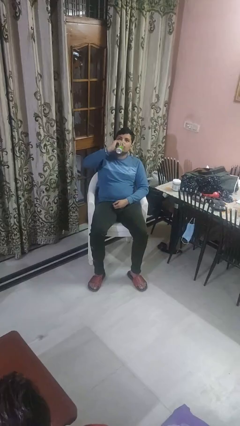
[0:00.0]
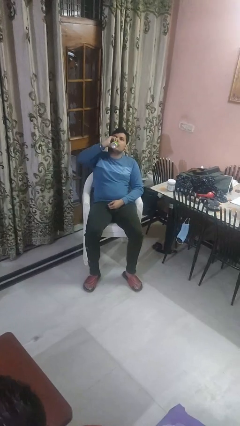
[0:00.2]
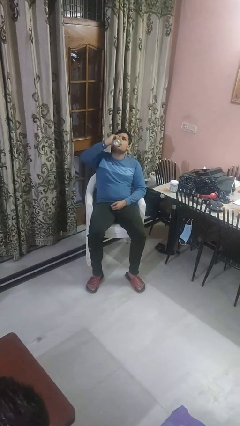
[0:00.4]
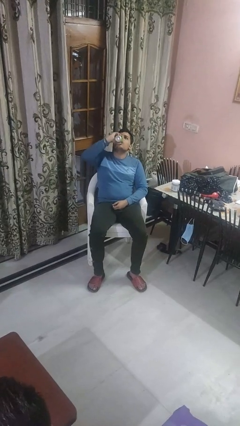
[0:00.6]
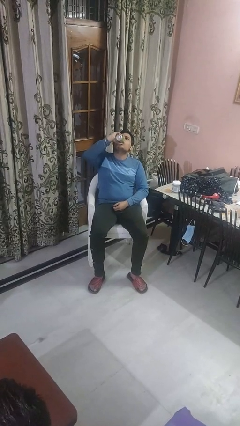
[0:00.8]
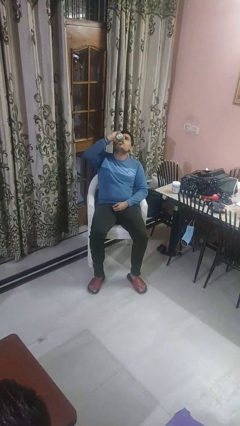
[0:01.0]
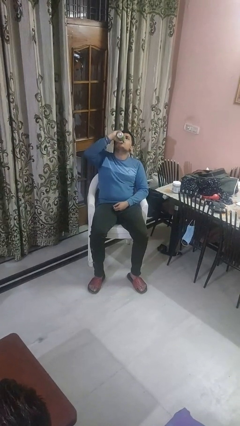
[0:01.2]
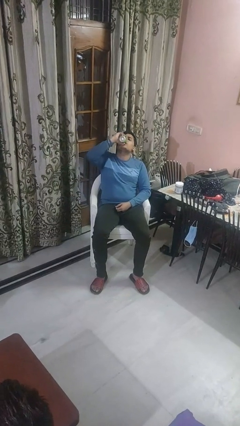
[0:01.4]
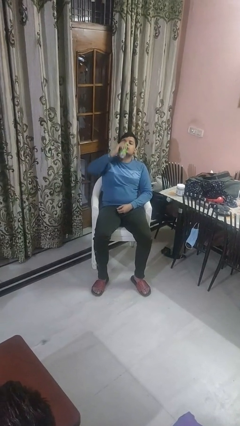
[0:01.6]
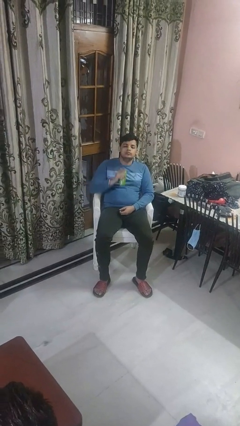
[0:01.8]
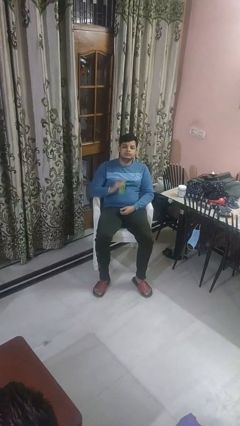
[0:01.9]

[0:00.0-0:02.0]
person drinks from beverage can

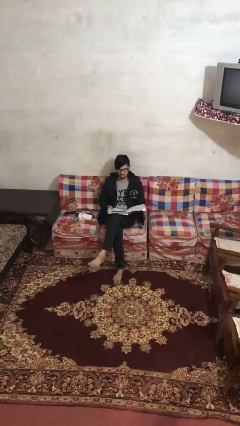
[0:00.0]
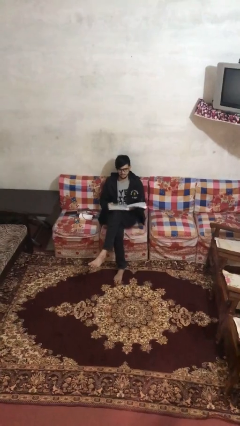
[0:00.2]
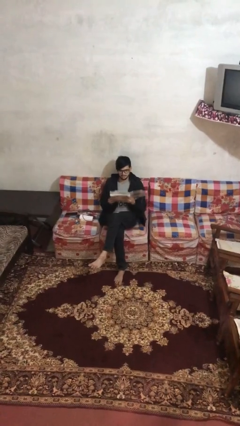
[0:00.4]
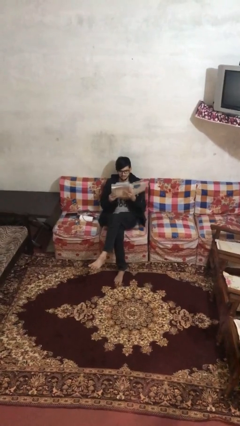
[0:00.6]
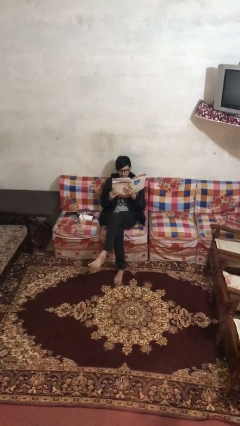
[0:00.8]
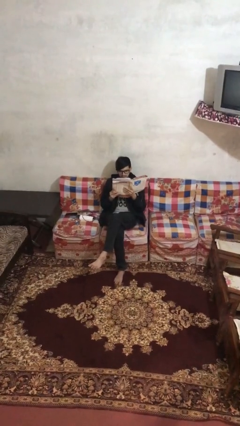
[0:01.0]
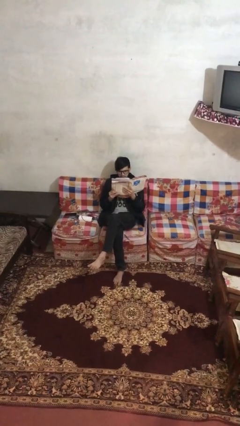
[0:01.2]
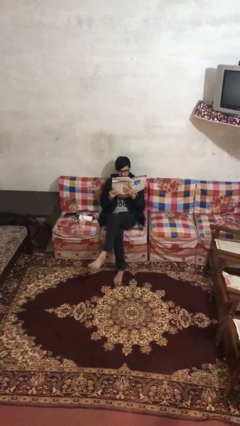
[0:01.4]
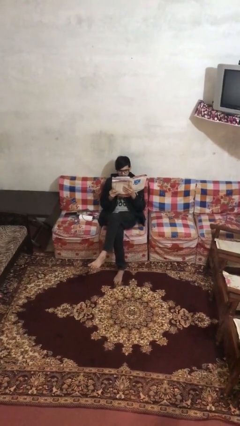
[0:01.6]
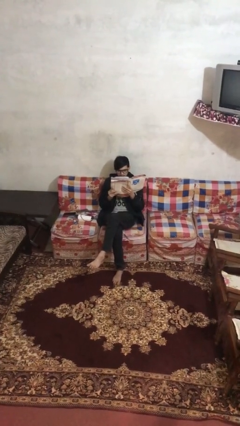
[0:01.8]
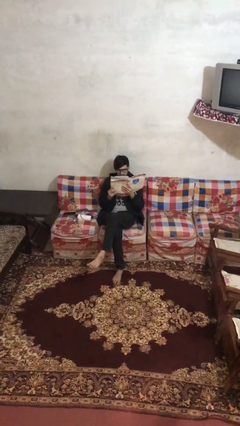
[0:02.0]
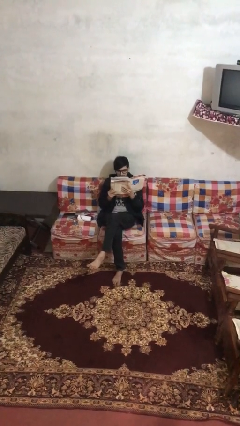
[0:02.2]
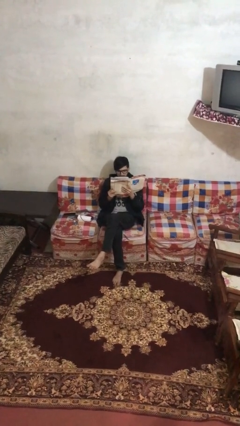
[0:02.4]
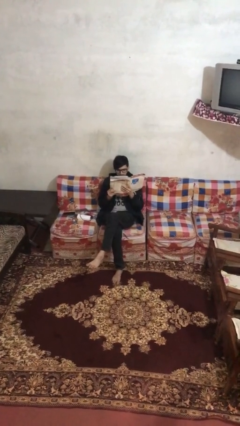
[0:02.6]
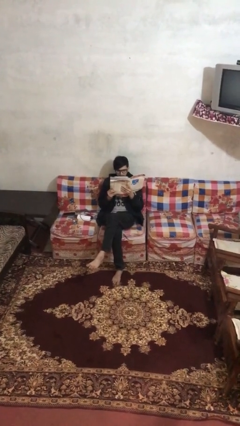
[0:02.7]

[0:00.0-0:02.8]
person reads document

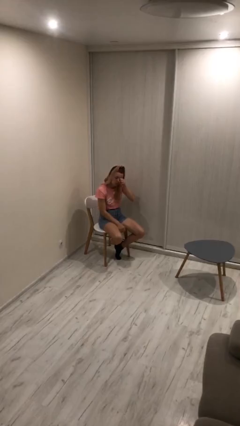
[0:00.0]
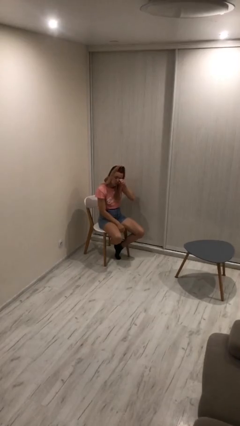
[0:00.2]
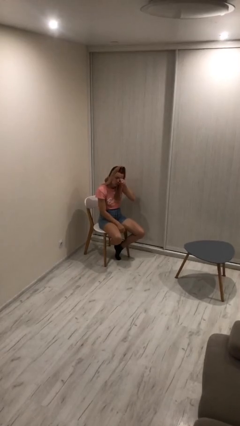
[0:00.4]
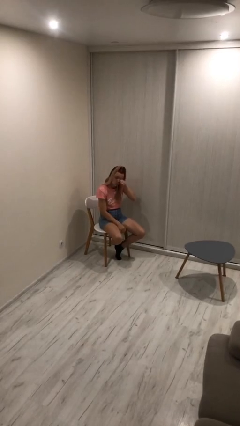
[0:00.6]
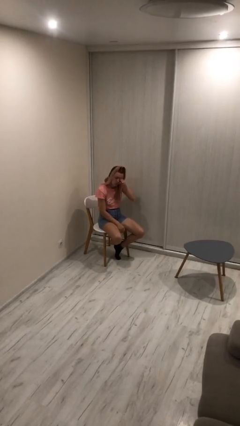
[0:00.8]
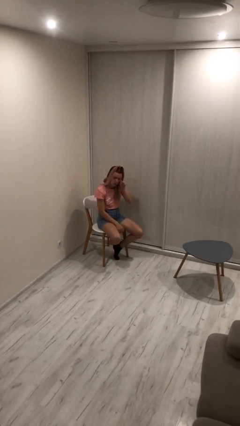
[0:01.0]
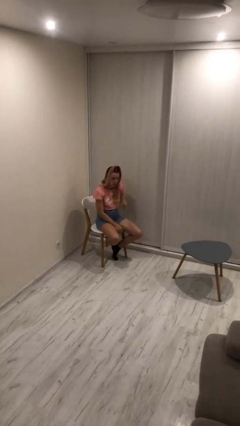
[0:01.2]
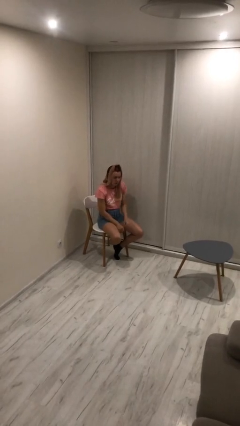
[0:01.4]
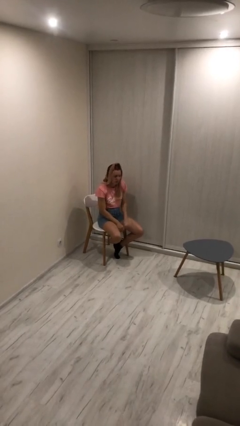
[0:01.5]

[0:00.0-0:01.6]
person rubs eyes

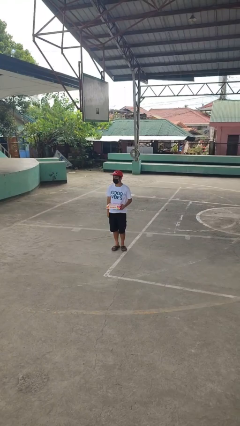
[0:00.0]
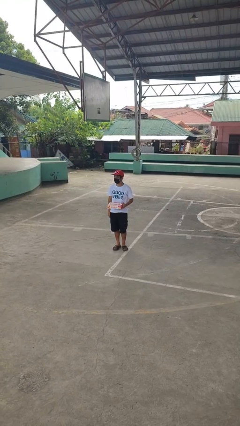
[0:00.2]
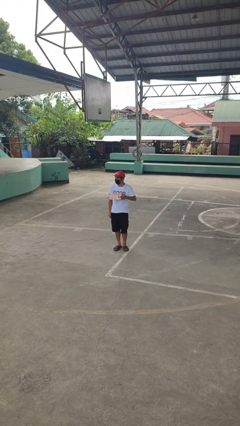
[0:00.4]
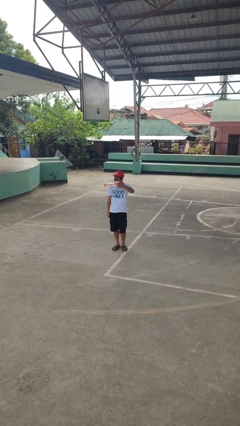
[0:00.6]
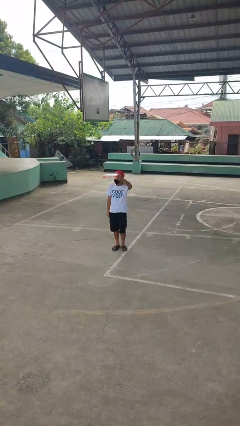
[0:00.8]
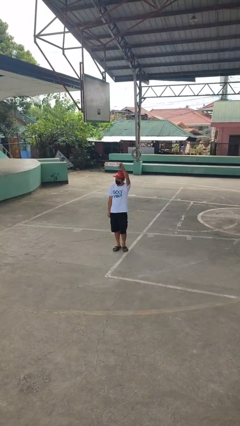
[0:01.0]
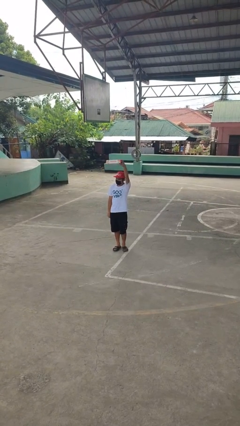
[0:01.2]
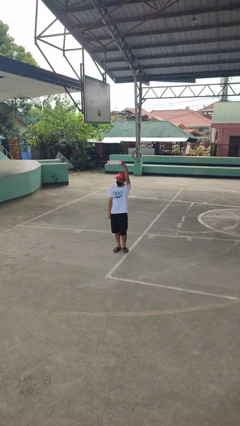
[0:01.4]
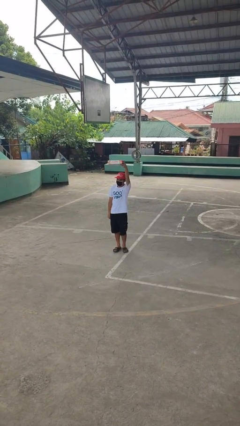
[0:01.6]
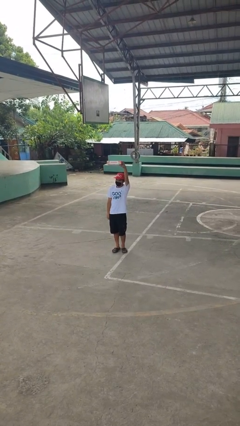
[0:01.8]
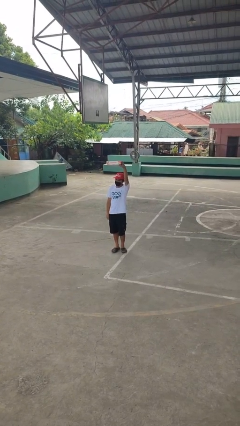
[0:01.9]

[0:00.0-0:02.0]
person holds object above head

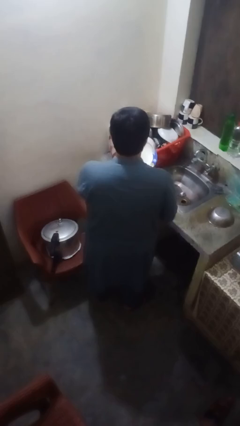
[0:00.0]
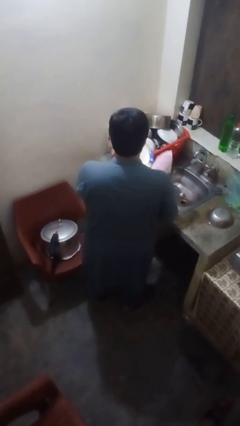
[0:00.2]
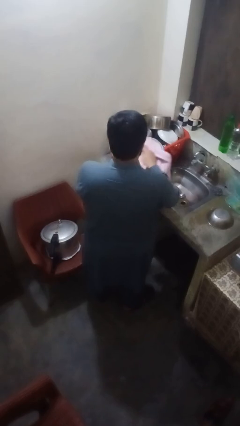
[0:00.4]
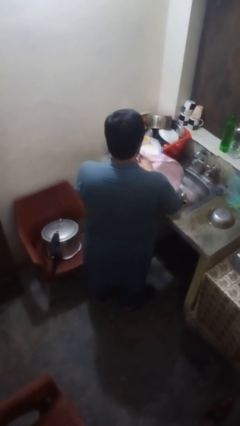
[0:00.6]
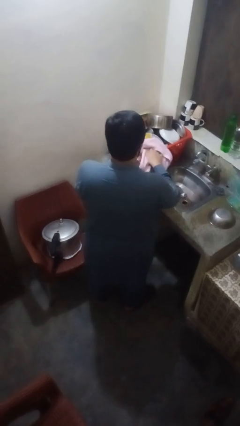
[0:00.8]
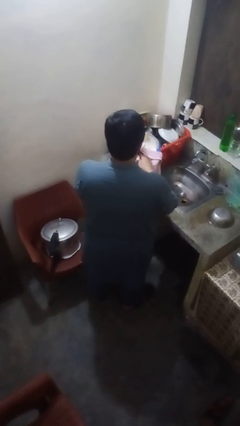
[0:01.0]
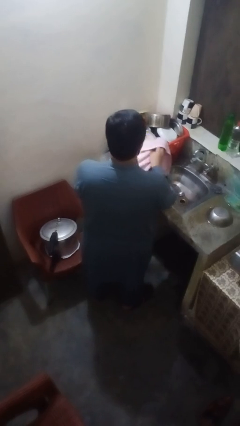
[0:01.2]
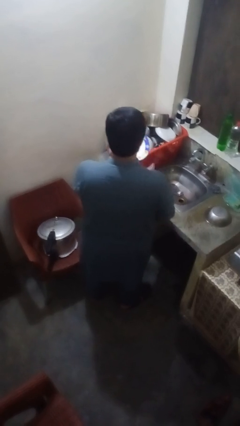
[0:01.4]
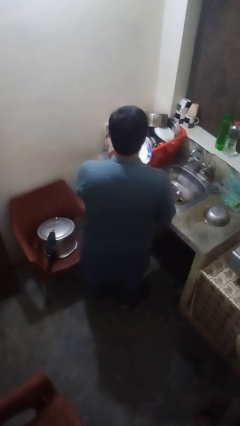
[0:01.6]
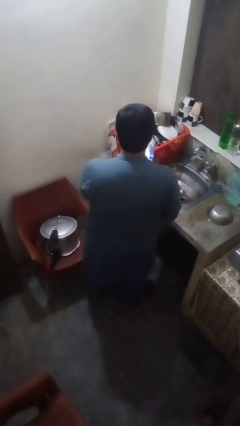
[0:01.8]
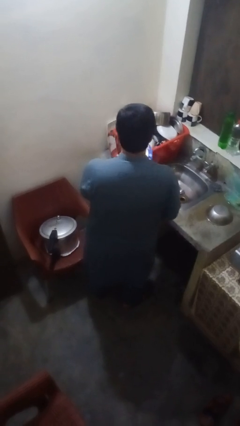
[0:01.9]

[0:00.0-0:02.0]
person dries dish

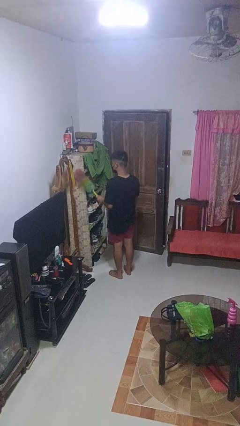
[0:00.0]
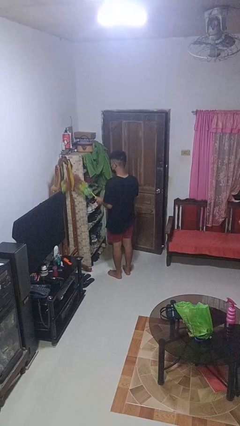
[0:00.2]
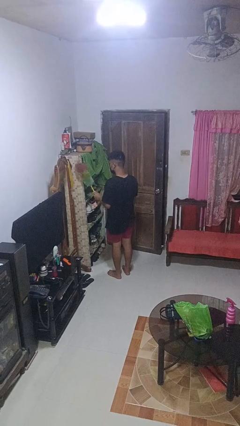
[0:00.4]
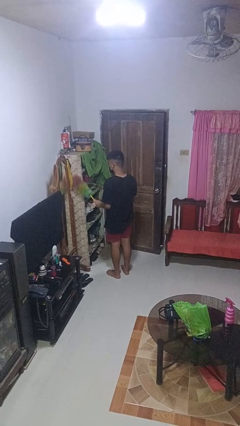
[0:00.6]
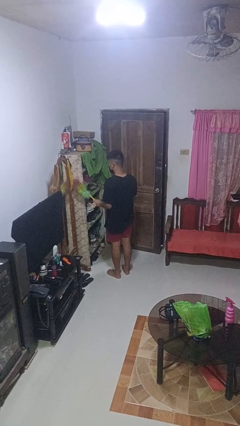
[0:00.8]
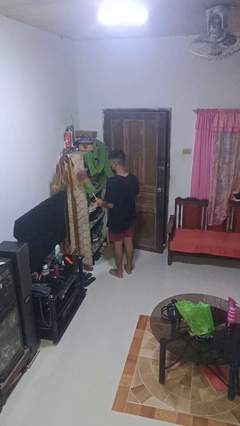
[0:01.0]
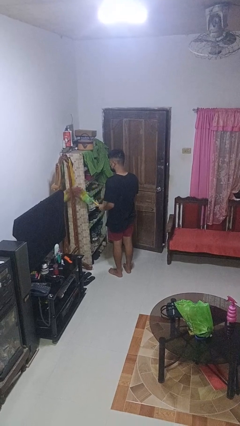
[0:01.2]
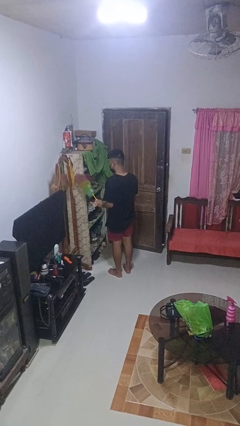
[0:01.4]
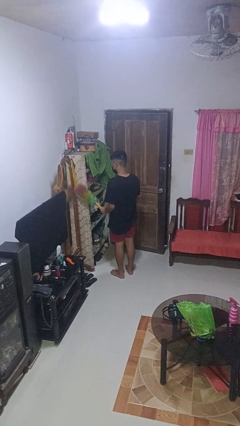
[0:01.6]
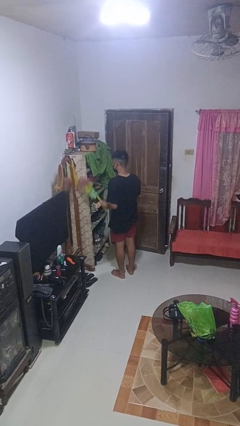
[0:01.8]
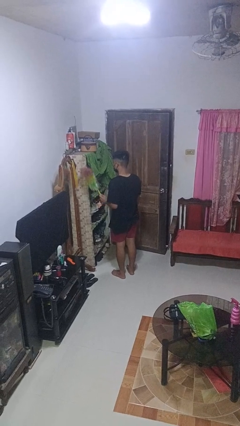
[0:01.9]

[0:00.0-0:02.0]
person dusts furniture

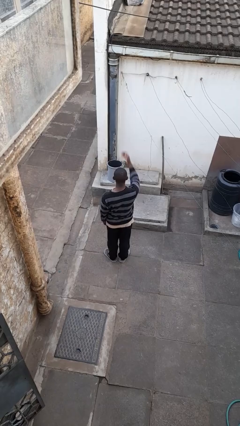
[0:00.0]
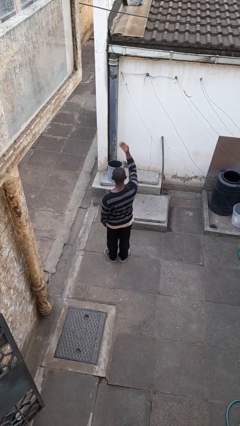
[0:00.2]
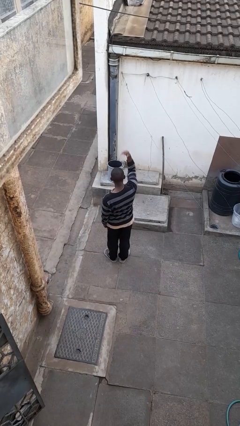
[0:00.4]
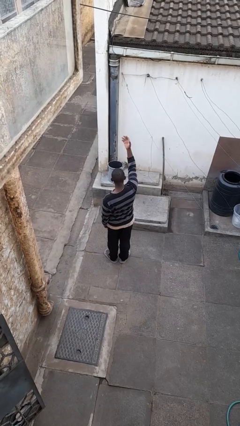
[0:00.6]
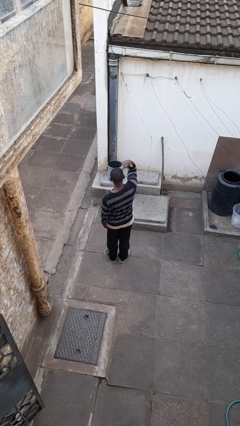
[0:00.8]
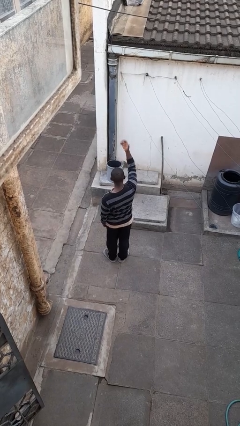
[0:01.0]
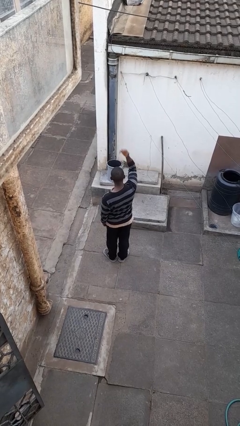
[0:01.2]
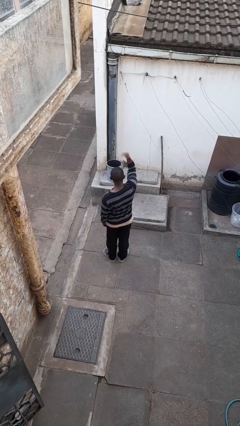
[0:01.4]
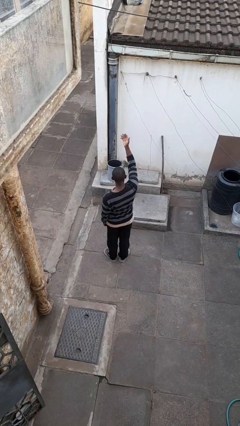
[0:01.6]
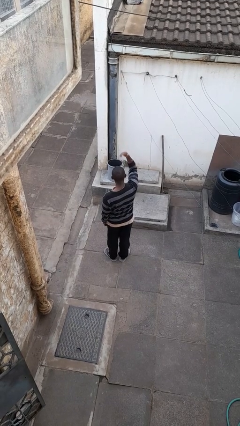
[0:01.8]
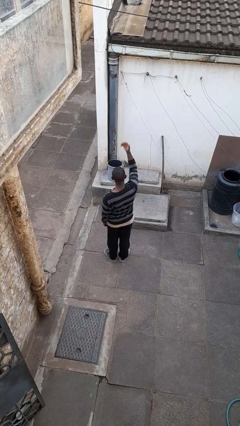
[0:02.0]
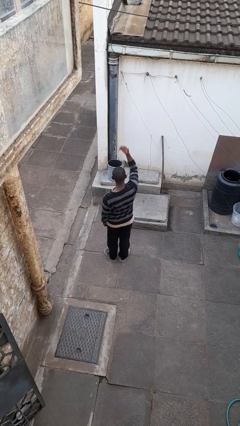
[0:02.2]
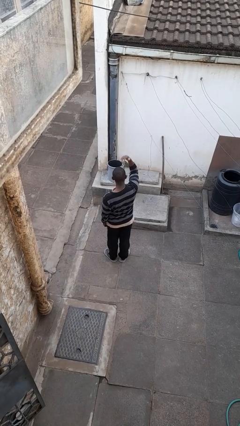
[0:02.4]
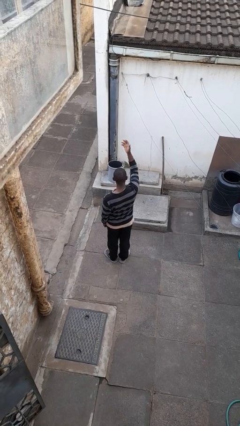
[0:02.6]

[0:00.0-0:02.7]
person gestures come here

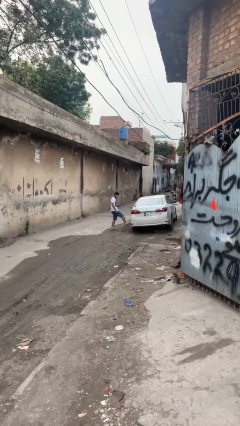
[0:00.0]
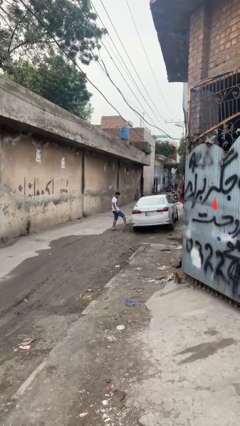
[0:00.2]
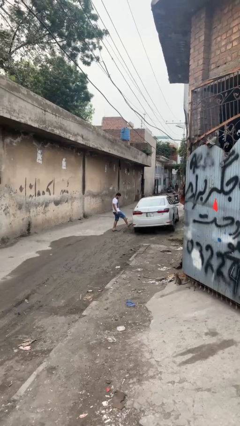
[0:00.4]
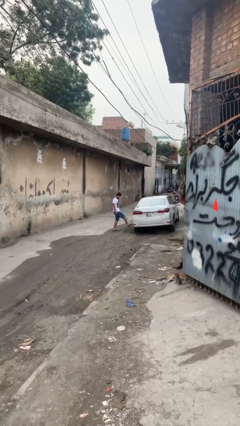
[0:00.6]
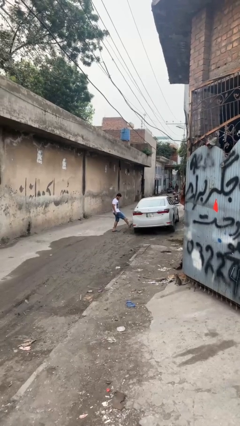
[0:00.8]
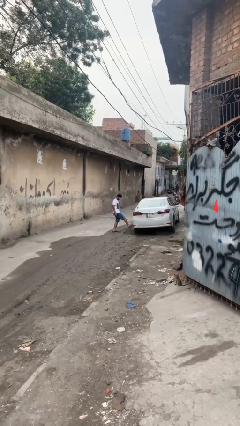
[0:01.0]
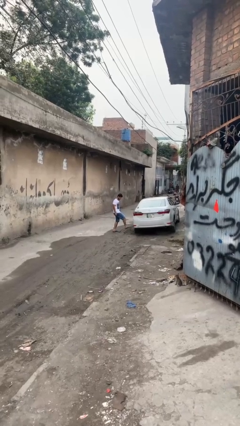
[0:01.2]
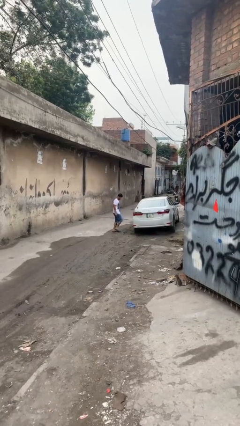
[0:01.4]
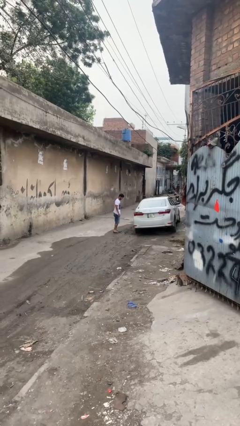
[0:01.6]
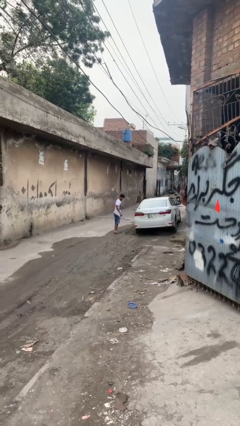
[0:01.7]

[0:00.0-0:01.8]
person kicks car tires
